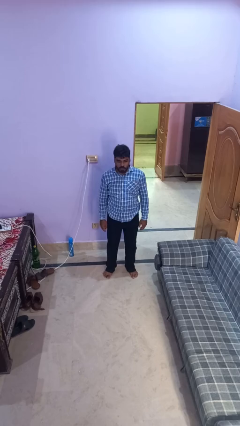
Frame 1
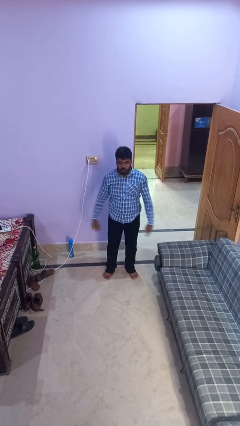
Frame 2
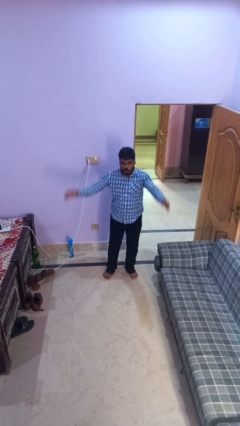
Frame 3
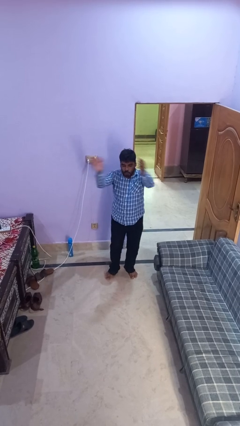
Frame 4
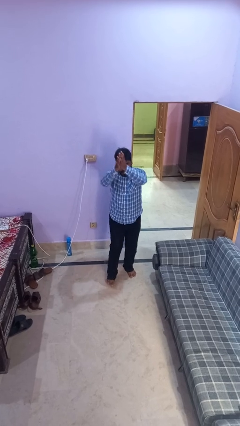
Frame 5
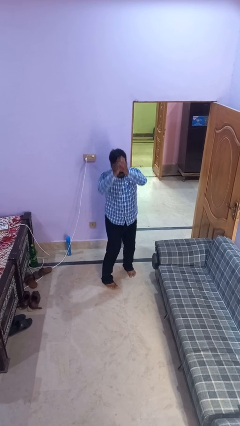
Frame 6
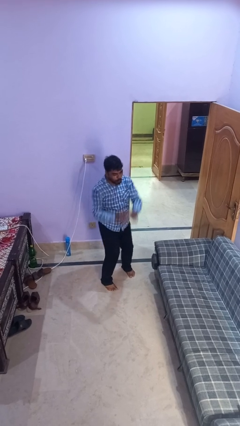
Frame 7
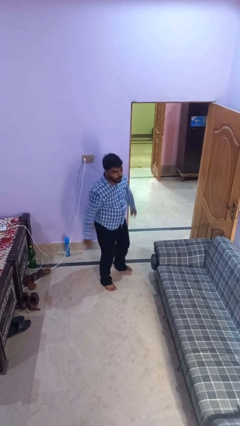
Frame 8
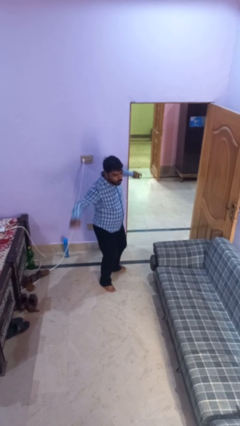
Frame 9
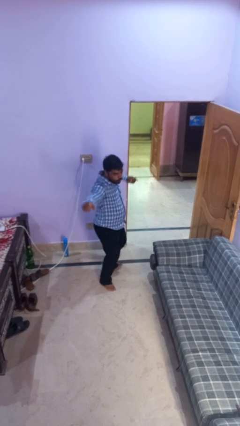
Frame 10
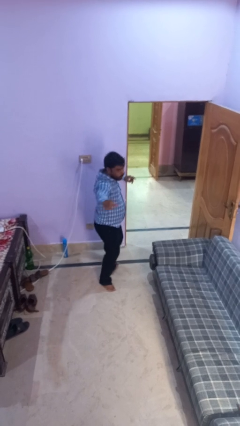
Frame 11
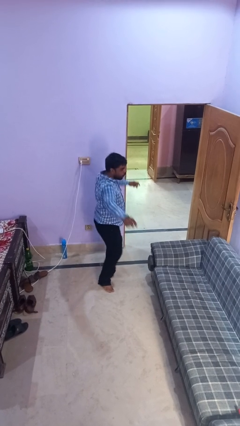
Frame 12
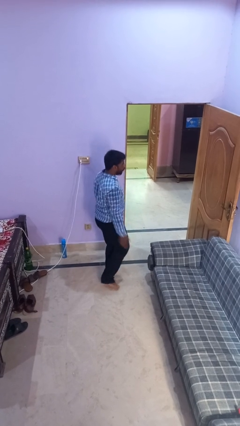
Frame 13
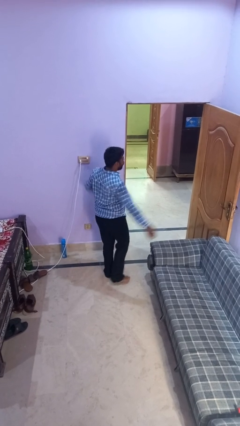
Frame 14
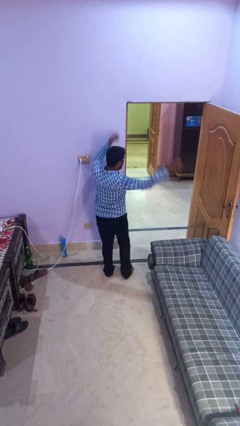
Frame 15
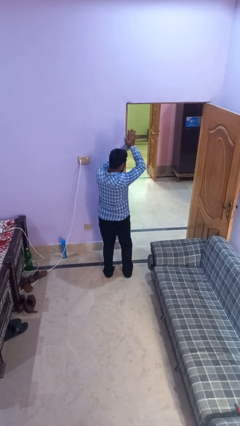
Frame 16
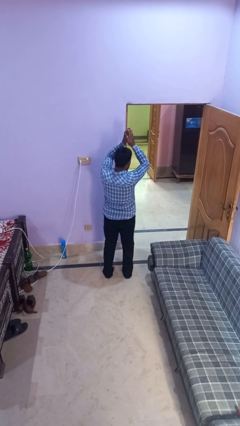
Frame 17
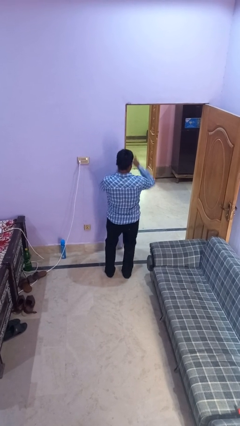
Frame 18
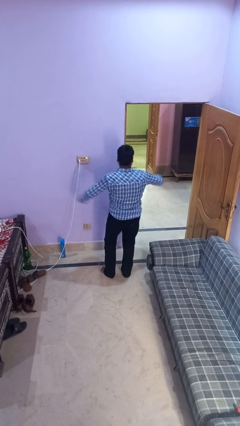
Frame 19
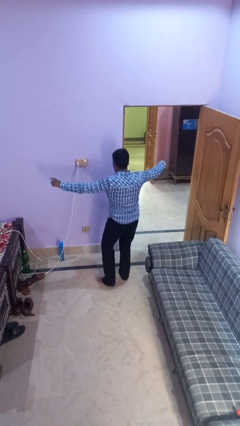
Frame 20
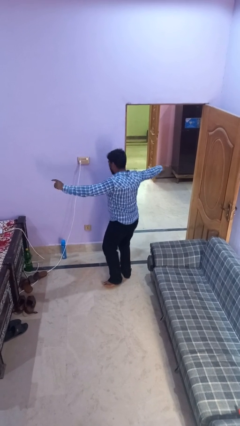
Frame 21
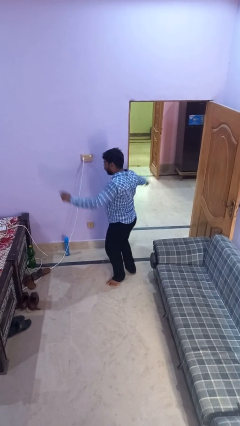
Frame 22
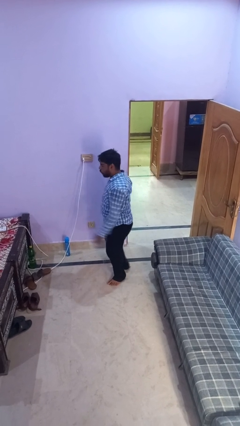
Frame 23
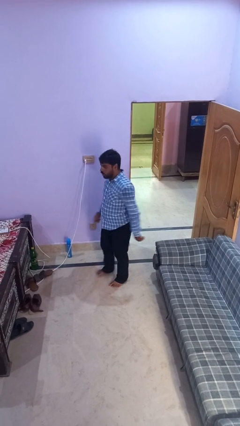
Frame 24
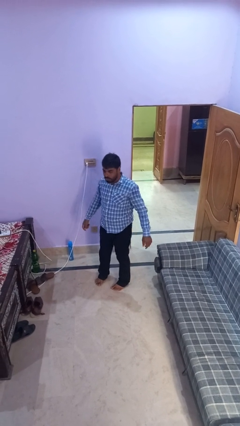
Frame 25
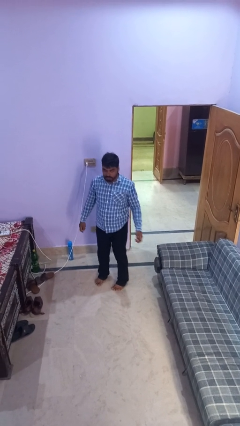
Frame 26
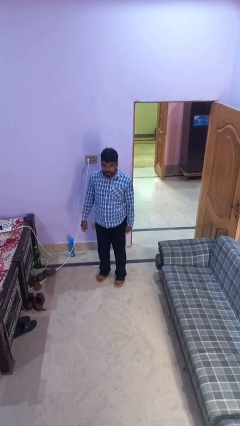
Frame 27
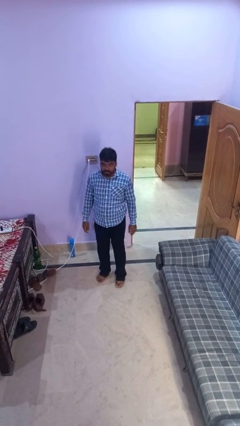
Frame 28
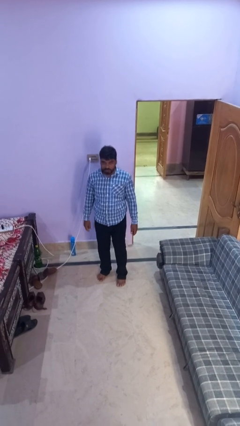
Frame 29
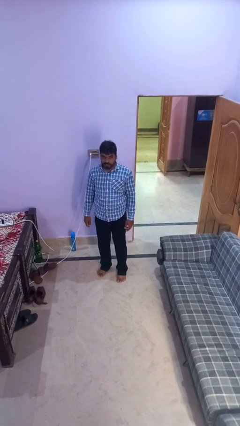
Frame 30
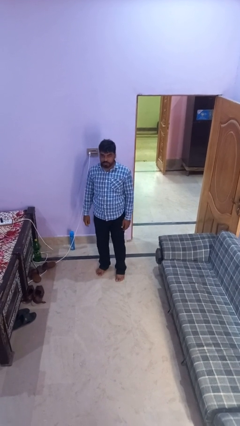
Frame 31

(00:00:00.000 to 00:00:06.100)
person dances in place

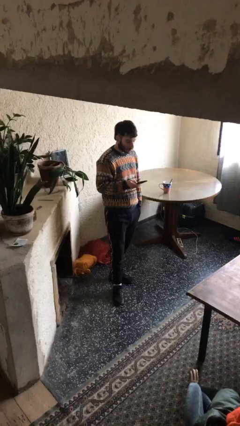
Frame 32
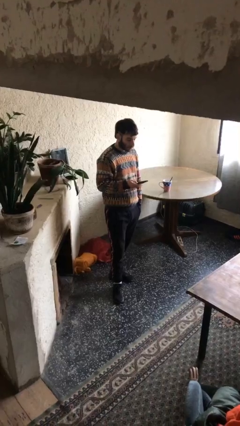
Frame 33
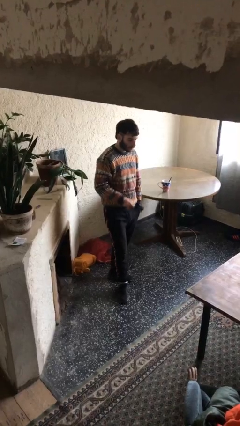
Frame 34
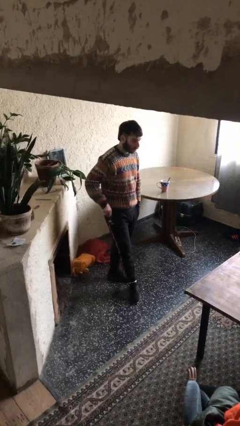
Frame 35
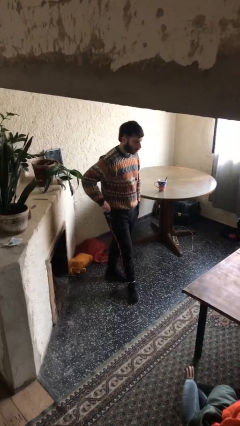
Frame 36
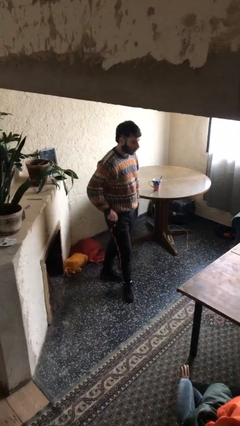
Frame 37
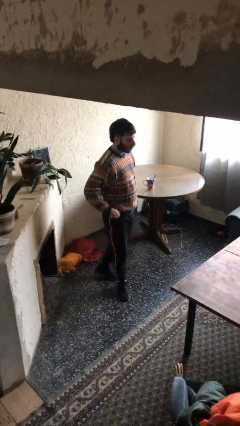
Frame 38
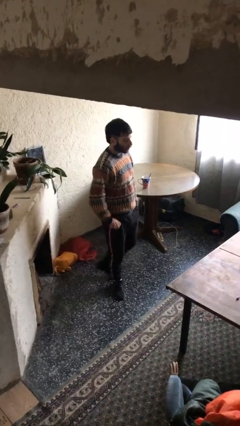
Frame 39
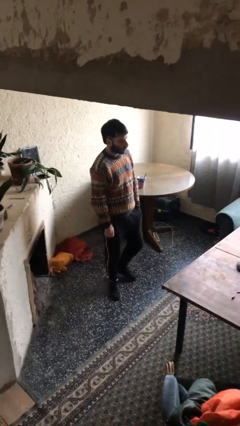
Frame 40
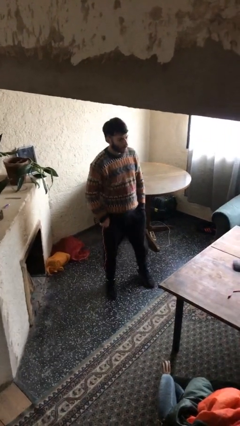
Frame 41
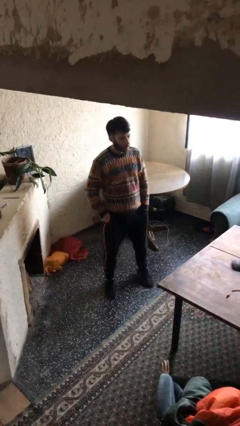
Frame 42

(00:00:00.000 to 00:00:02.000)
person puts phone into pocket

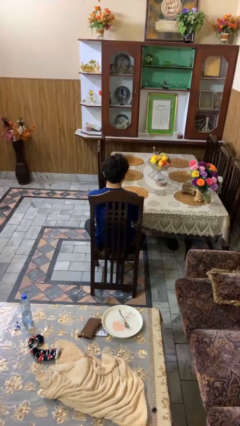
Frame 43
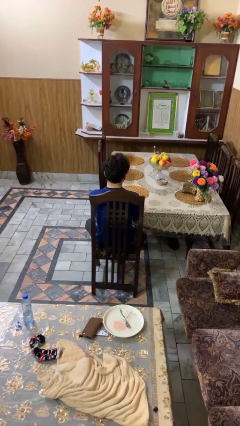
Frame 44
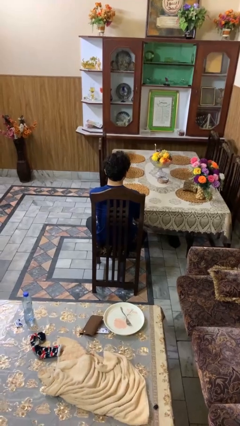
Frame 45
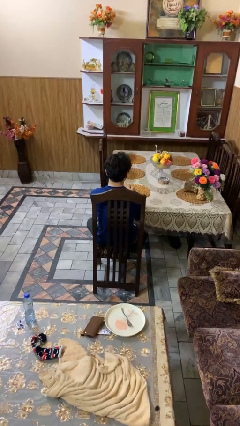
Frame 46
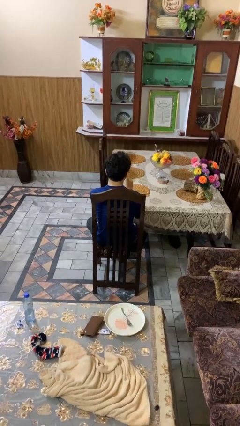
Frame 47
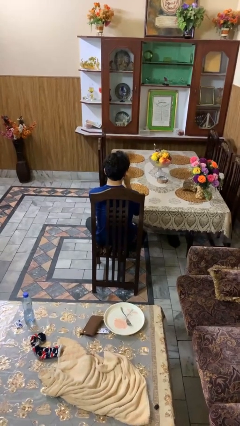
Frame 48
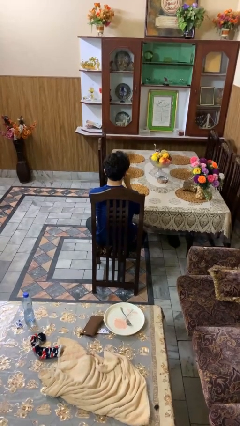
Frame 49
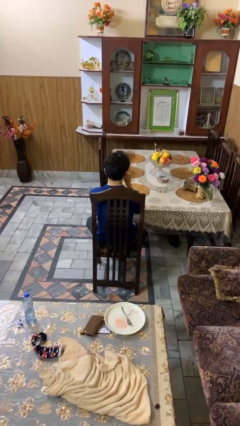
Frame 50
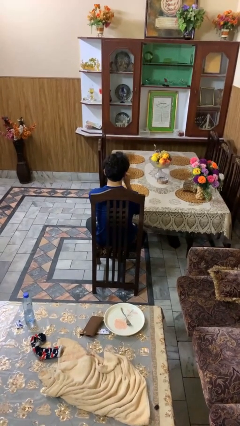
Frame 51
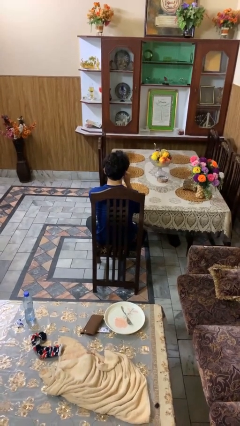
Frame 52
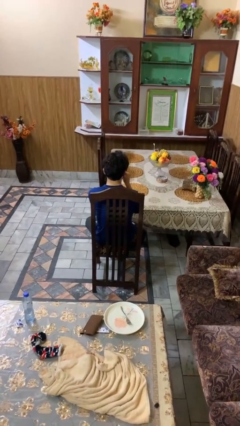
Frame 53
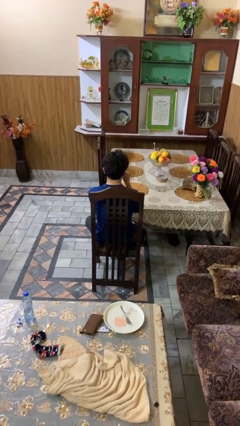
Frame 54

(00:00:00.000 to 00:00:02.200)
person drinks from mug

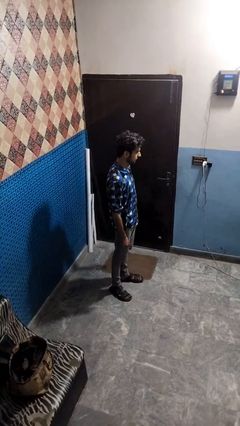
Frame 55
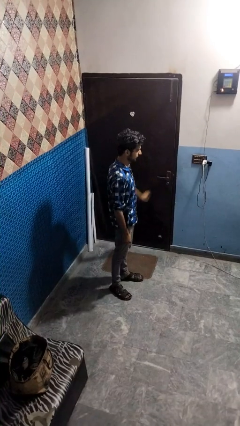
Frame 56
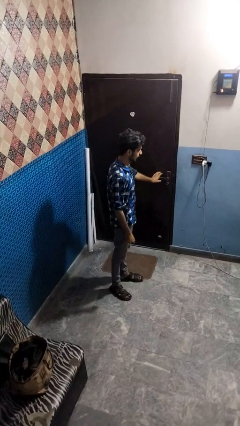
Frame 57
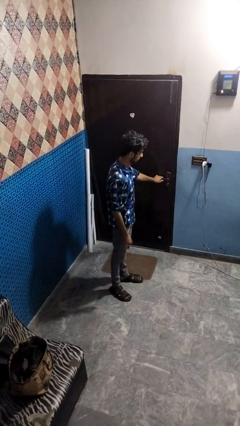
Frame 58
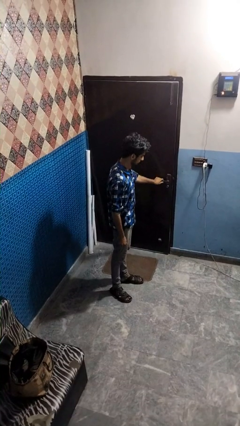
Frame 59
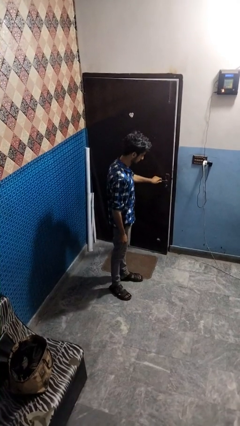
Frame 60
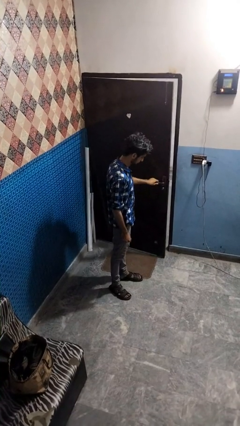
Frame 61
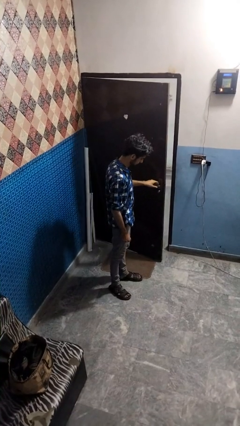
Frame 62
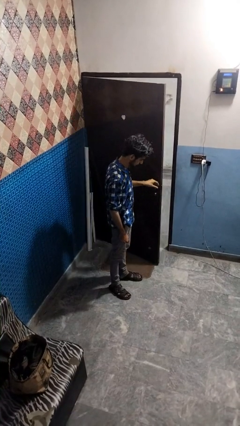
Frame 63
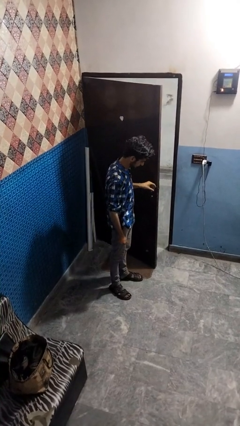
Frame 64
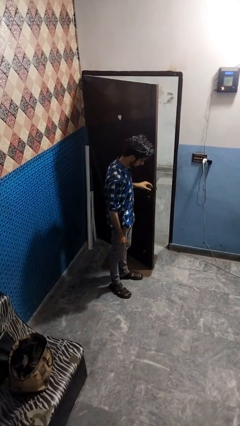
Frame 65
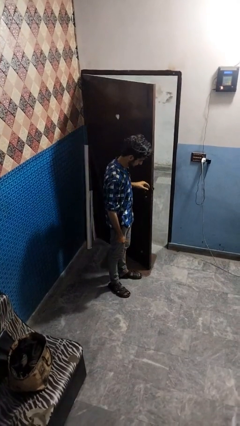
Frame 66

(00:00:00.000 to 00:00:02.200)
person opens facility door

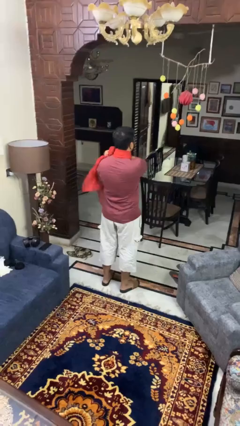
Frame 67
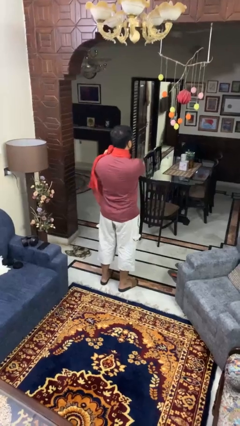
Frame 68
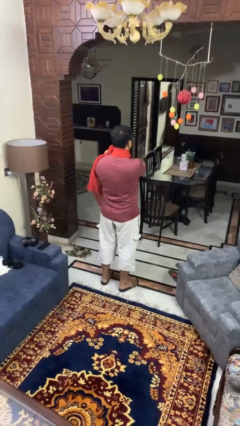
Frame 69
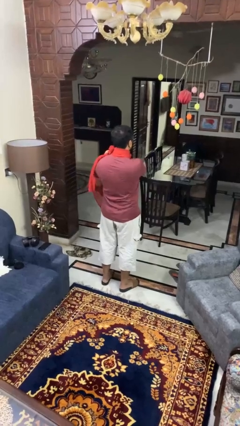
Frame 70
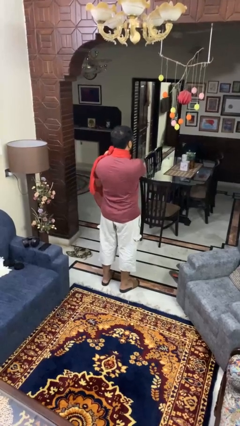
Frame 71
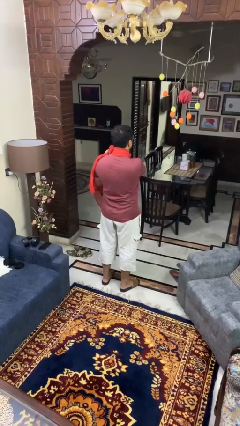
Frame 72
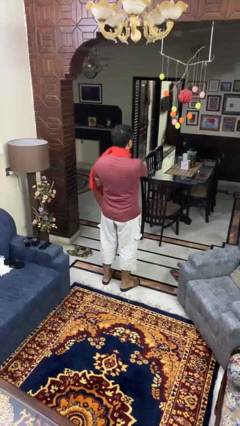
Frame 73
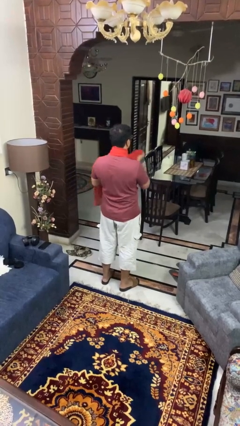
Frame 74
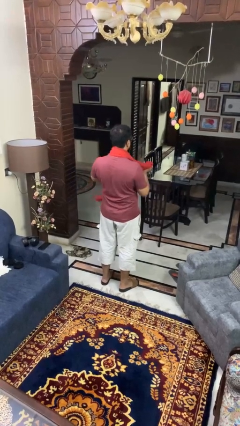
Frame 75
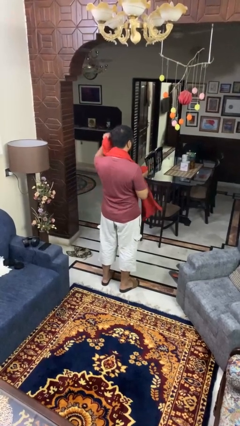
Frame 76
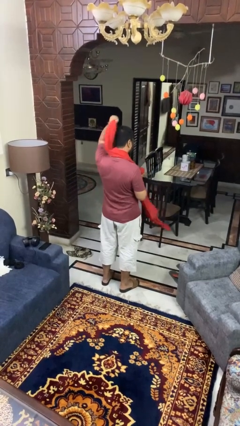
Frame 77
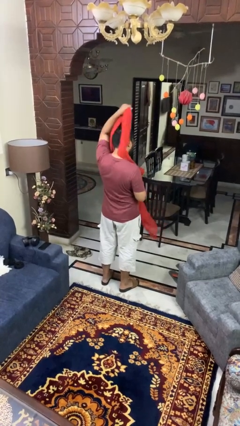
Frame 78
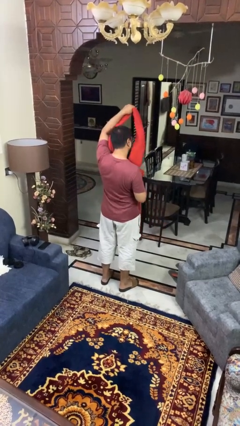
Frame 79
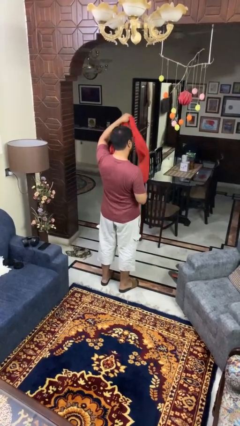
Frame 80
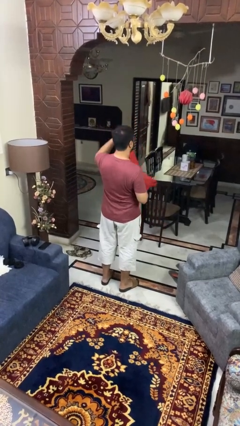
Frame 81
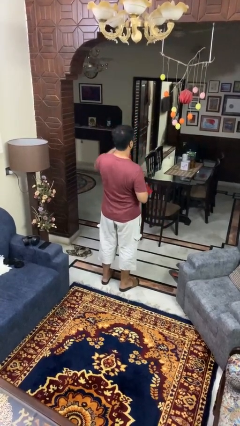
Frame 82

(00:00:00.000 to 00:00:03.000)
person takes off scarf

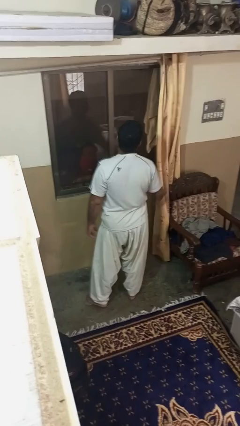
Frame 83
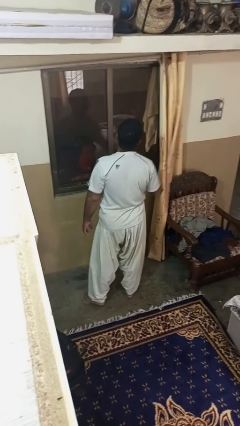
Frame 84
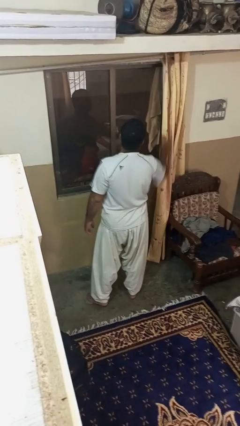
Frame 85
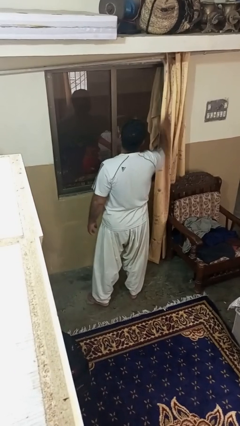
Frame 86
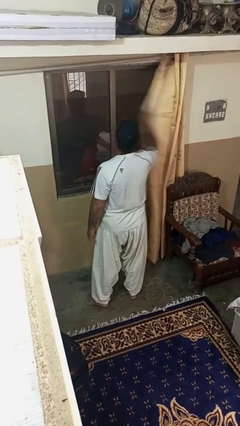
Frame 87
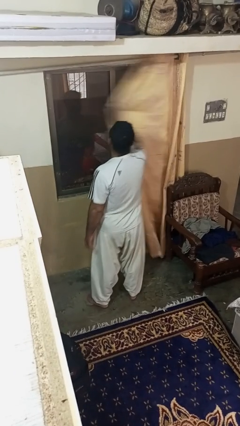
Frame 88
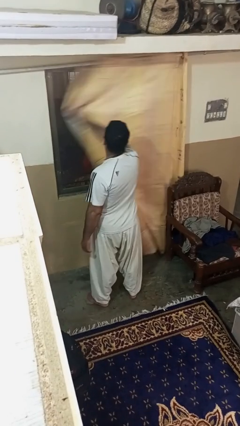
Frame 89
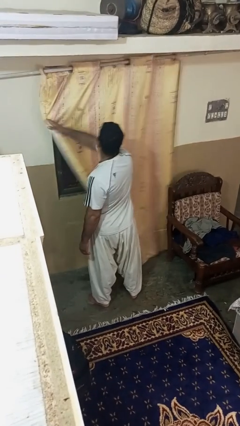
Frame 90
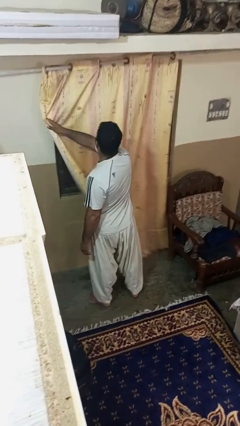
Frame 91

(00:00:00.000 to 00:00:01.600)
person closes curtains

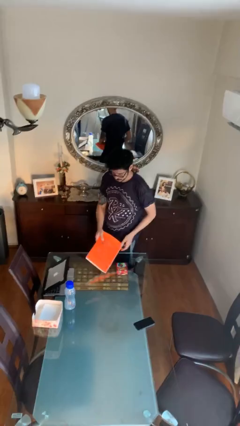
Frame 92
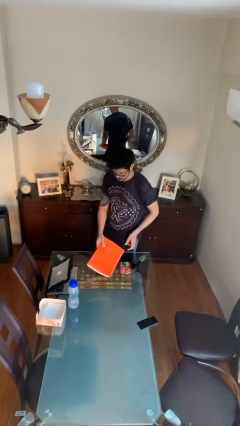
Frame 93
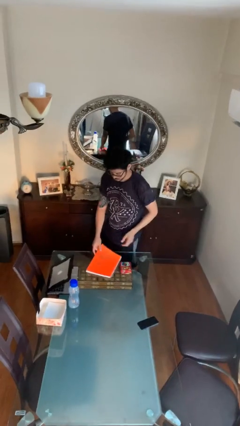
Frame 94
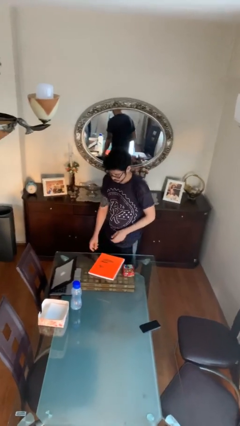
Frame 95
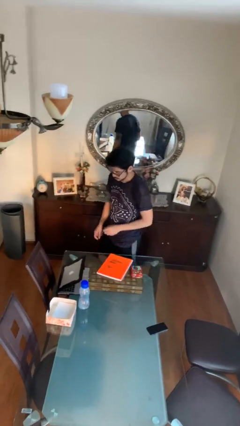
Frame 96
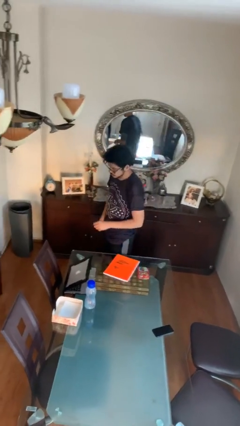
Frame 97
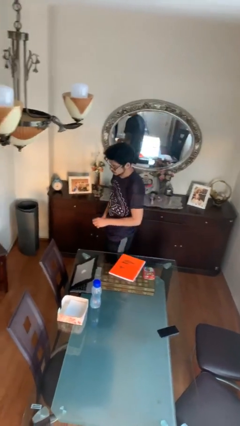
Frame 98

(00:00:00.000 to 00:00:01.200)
person puts down object on table
